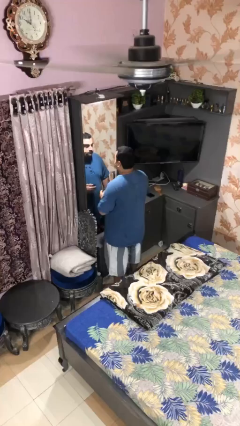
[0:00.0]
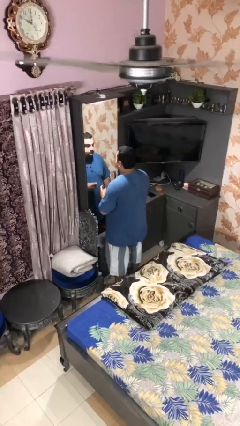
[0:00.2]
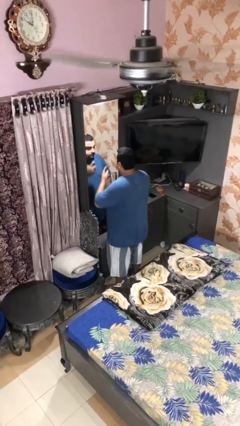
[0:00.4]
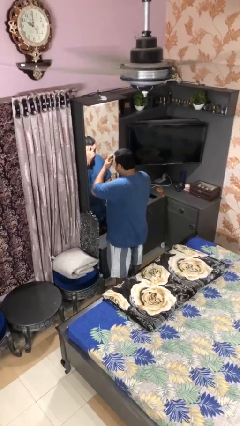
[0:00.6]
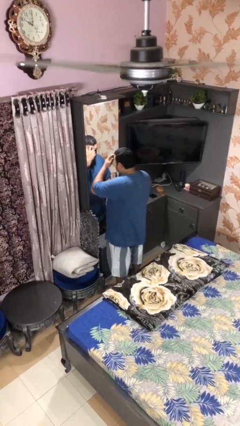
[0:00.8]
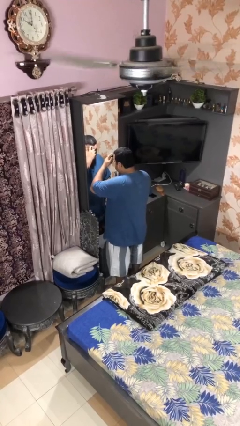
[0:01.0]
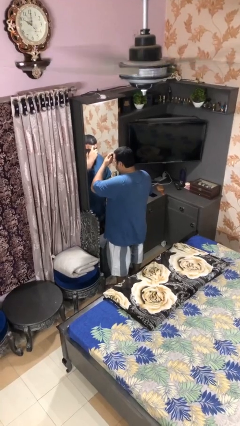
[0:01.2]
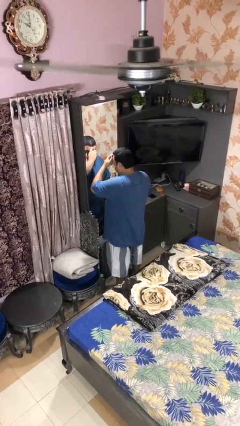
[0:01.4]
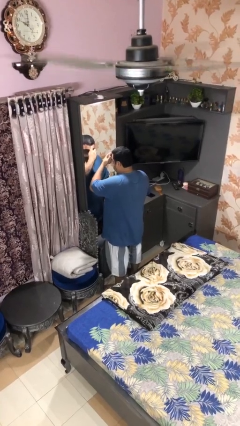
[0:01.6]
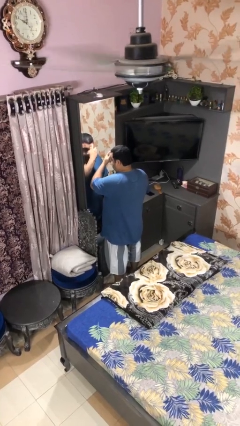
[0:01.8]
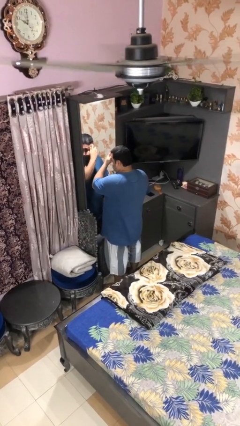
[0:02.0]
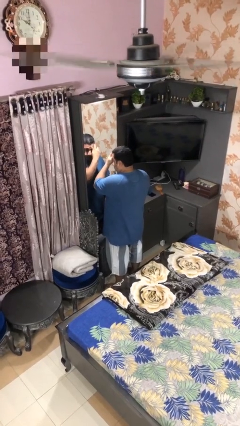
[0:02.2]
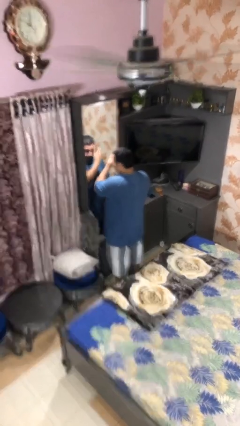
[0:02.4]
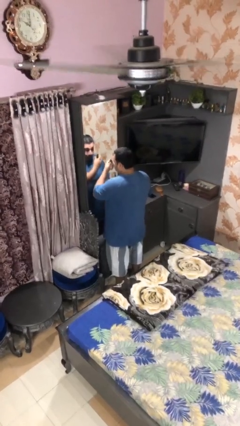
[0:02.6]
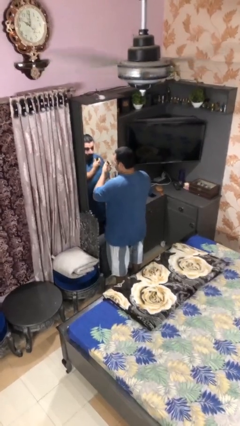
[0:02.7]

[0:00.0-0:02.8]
person applies foundation makeup

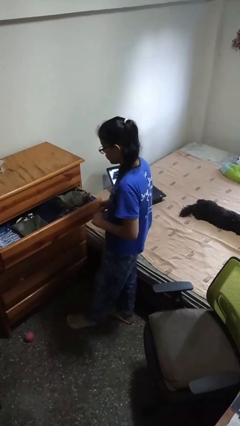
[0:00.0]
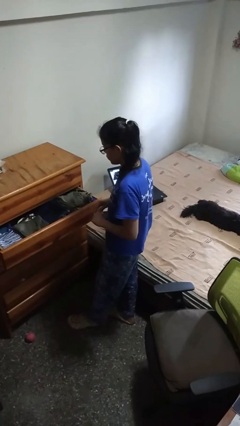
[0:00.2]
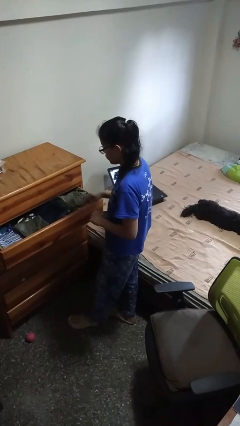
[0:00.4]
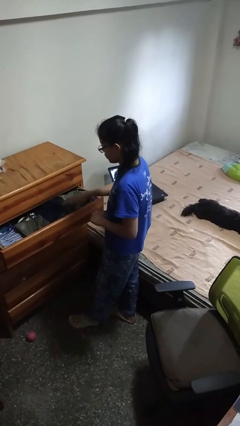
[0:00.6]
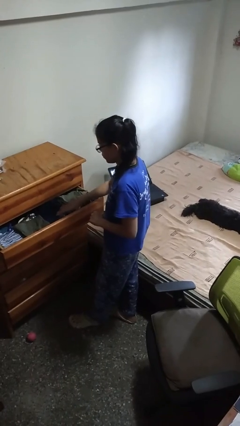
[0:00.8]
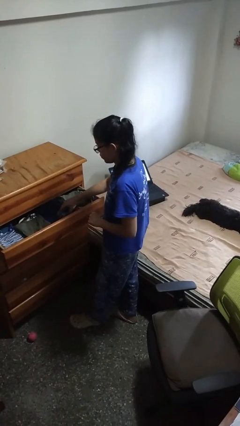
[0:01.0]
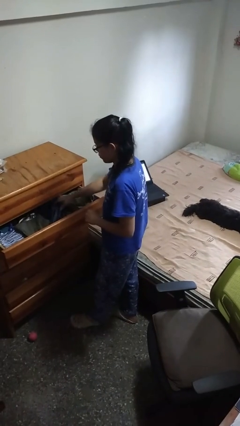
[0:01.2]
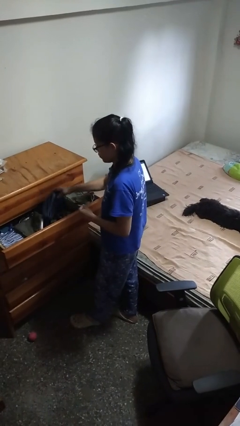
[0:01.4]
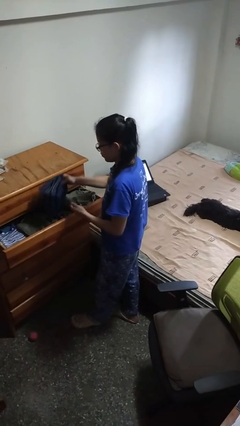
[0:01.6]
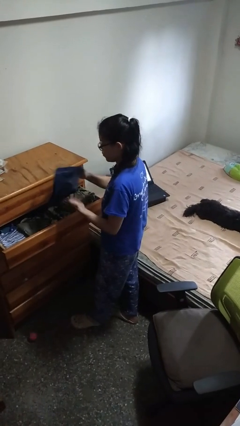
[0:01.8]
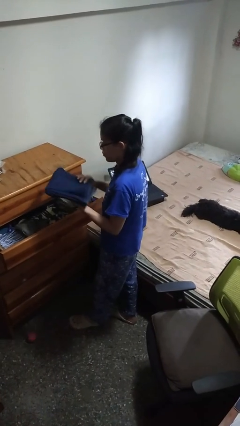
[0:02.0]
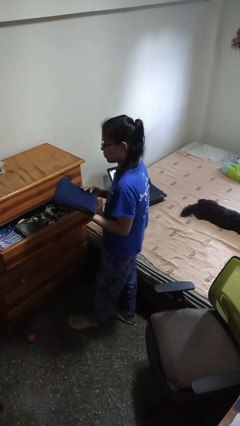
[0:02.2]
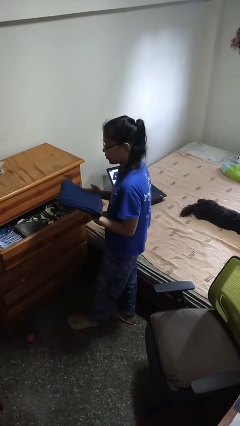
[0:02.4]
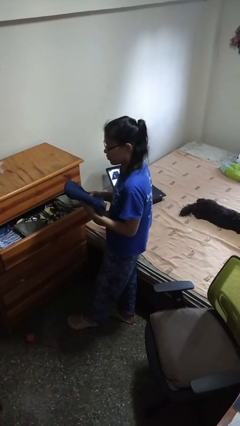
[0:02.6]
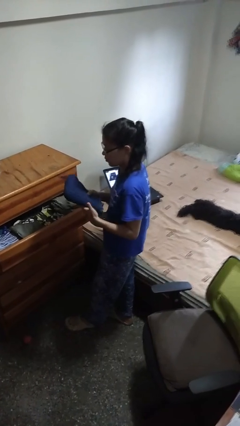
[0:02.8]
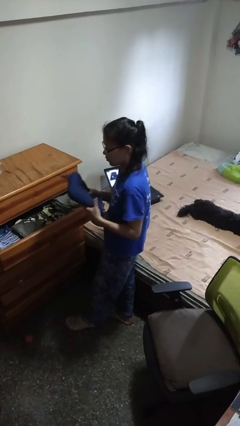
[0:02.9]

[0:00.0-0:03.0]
person takes clothes from dresser

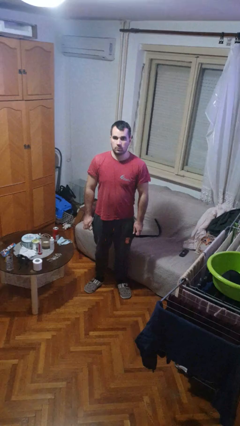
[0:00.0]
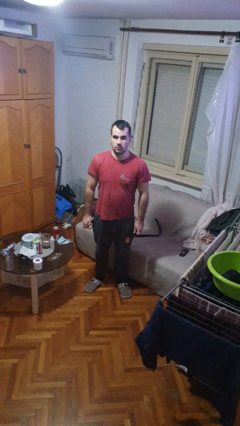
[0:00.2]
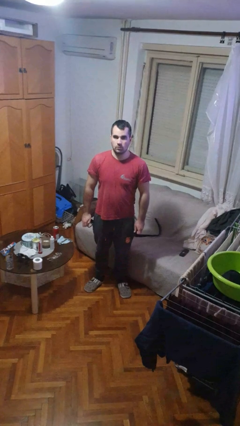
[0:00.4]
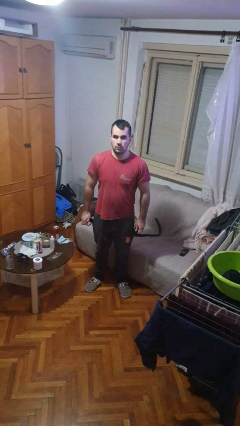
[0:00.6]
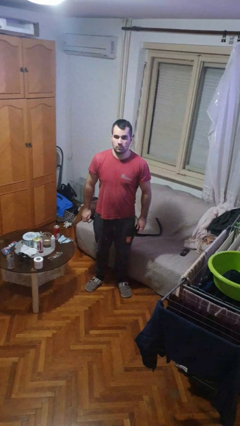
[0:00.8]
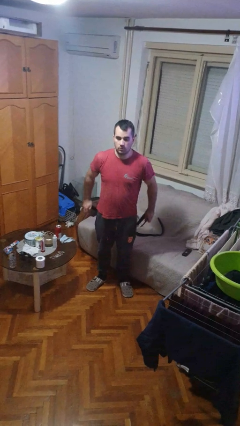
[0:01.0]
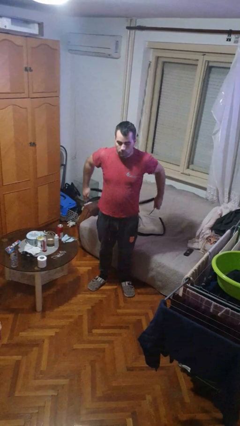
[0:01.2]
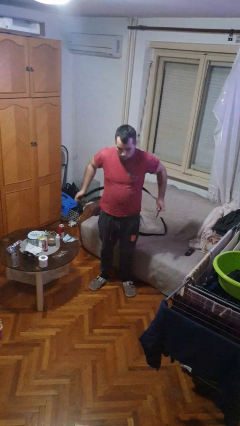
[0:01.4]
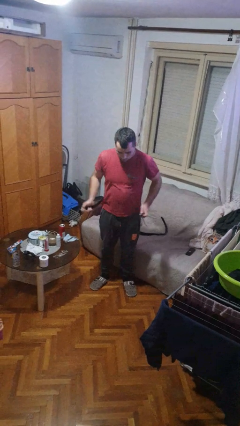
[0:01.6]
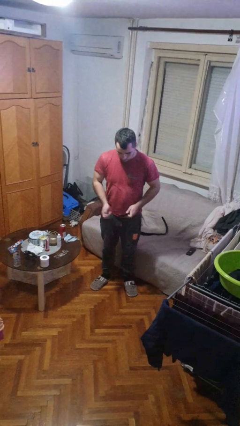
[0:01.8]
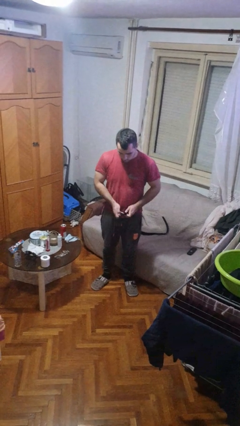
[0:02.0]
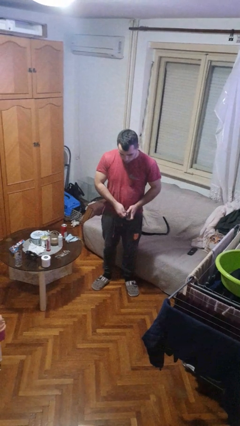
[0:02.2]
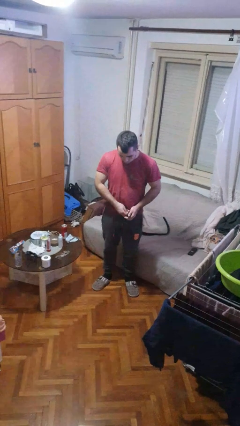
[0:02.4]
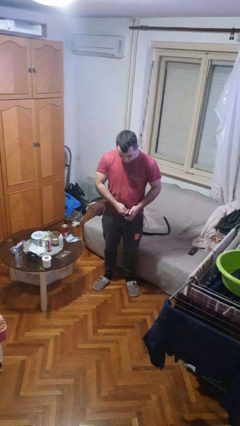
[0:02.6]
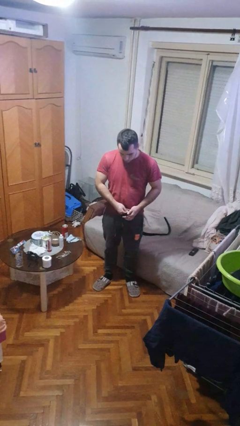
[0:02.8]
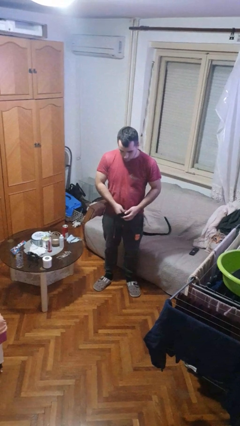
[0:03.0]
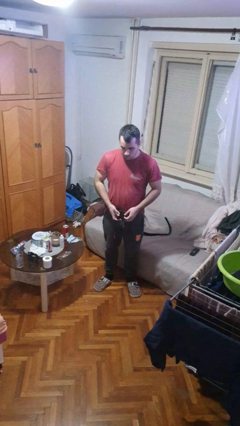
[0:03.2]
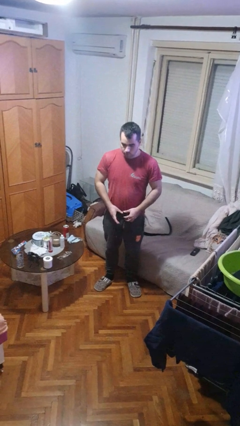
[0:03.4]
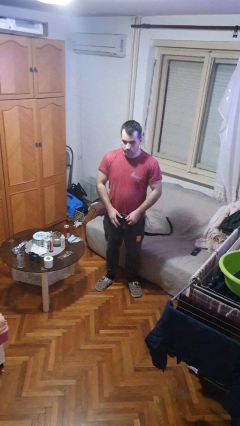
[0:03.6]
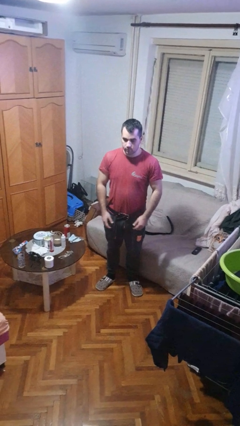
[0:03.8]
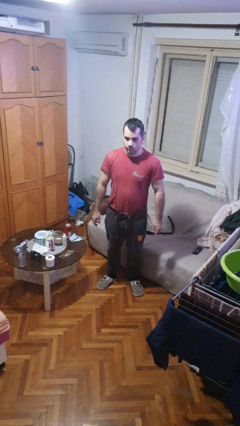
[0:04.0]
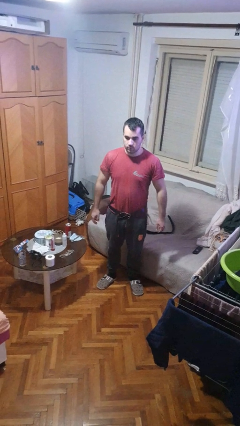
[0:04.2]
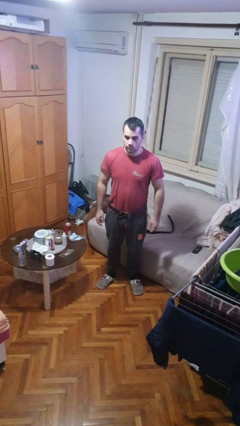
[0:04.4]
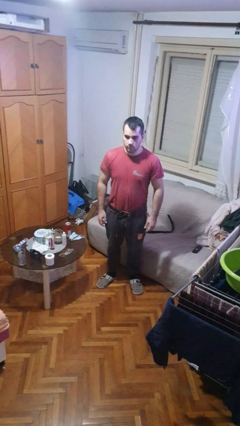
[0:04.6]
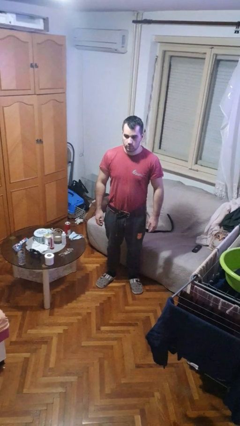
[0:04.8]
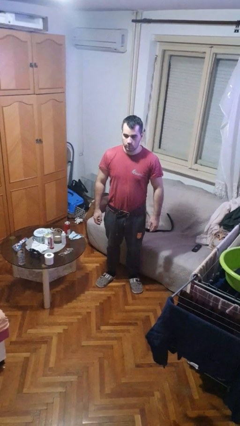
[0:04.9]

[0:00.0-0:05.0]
person puts on belt

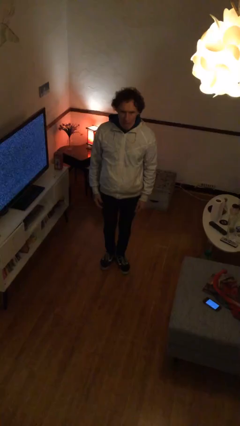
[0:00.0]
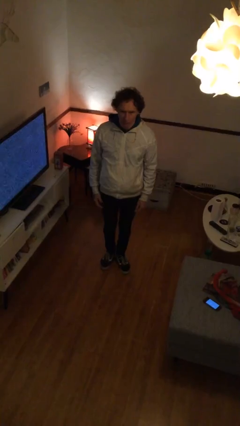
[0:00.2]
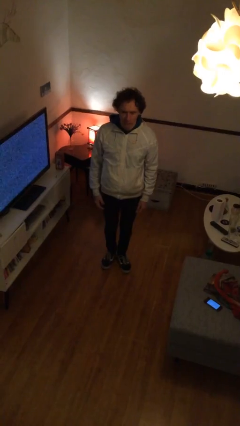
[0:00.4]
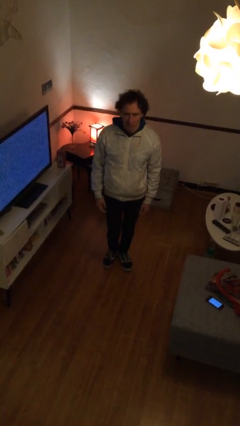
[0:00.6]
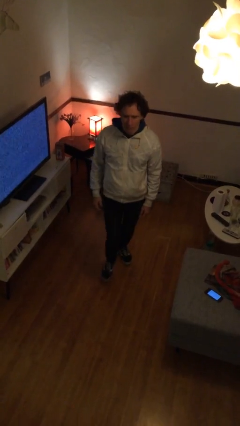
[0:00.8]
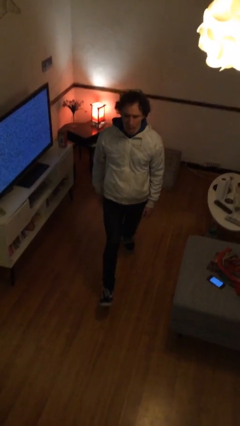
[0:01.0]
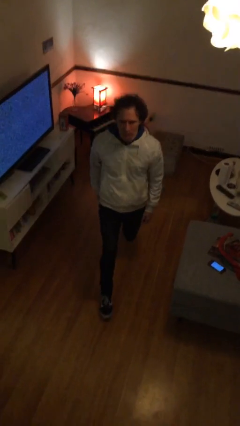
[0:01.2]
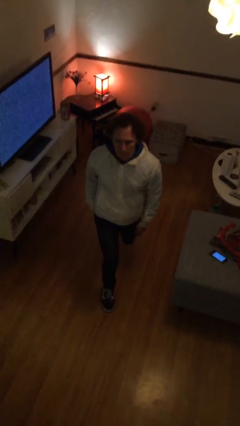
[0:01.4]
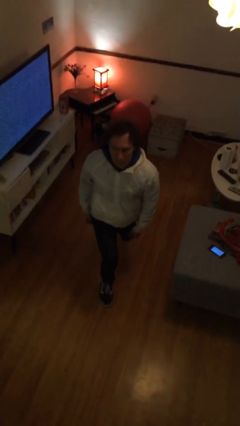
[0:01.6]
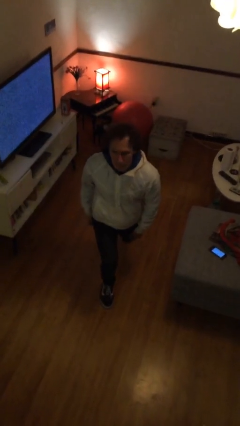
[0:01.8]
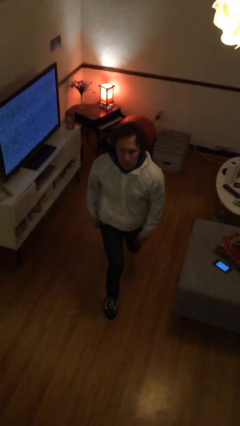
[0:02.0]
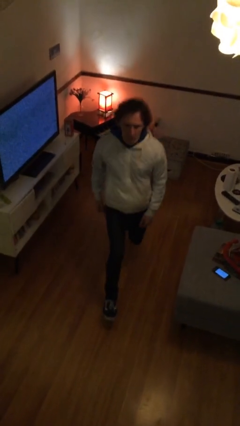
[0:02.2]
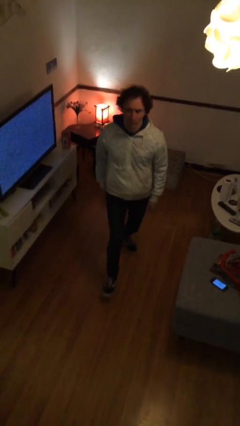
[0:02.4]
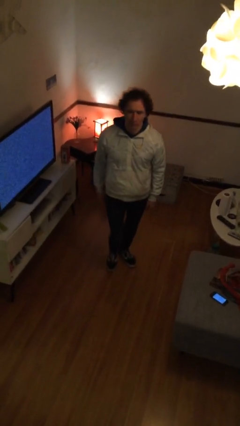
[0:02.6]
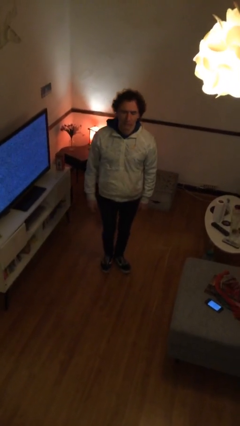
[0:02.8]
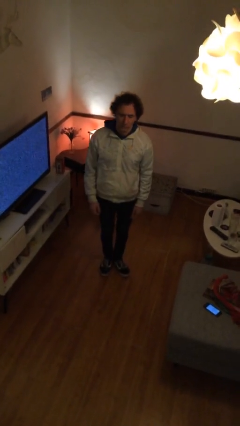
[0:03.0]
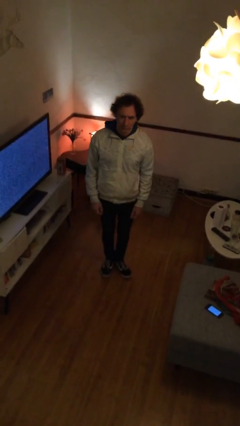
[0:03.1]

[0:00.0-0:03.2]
person exercises with lunges

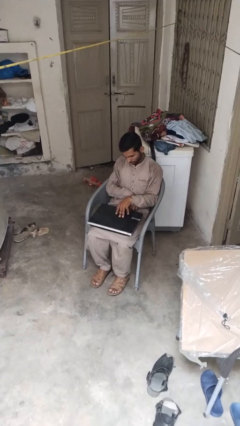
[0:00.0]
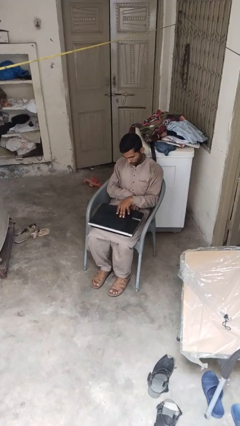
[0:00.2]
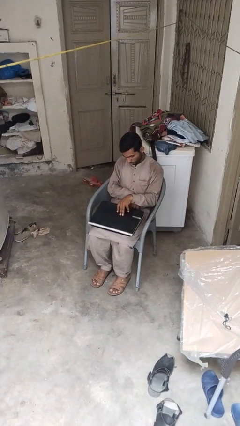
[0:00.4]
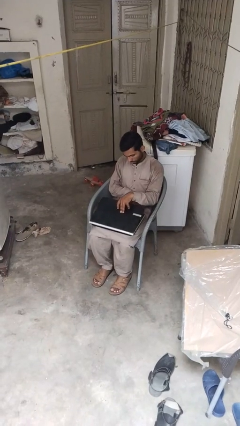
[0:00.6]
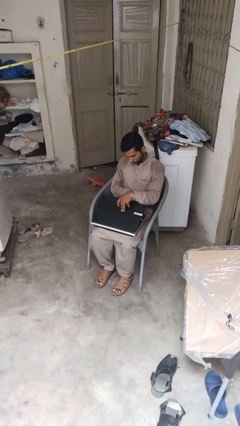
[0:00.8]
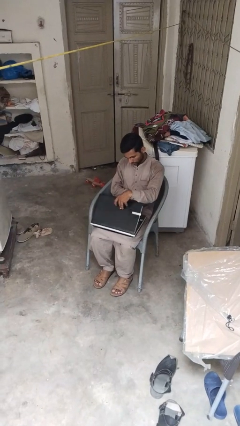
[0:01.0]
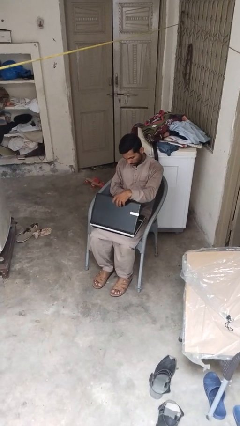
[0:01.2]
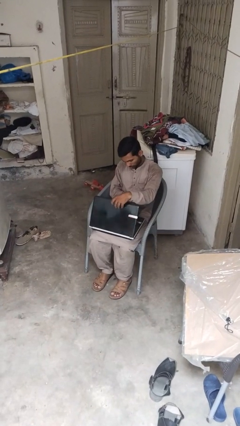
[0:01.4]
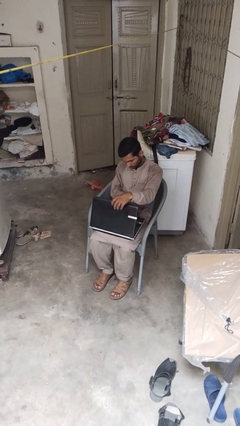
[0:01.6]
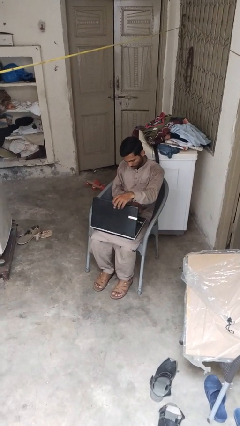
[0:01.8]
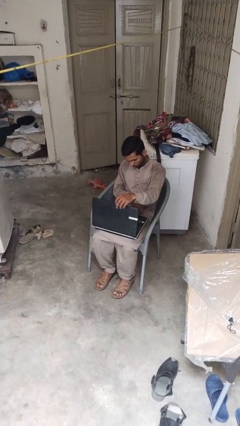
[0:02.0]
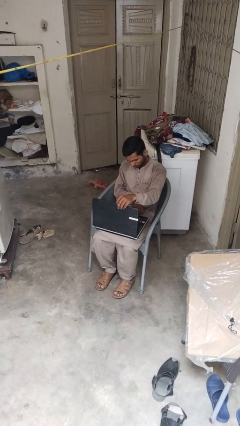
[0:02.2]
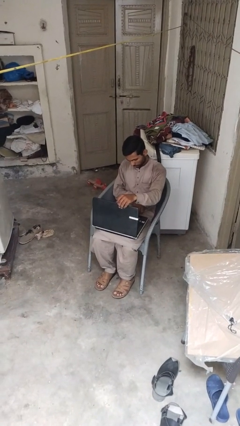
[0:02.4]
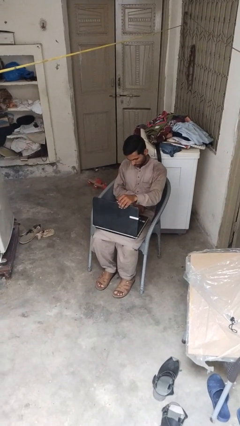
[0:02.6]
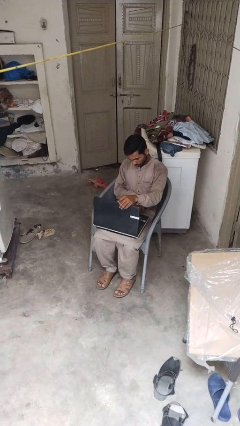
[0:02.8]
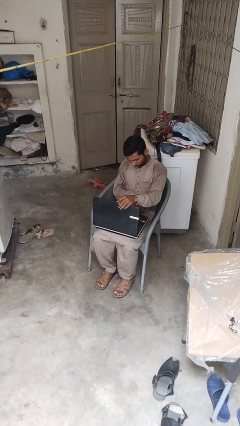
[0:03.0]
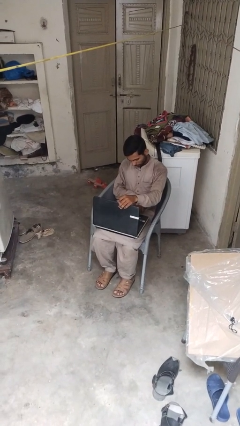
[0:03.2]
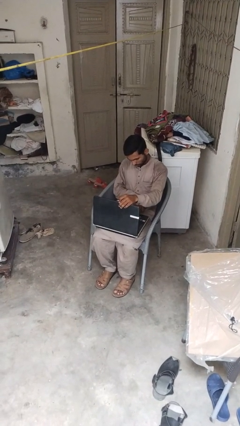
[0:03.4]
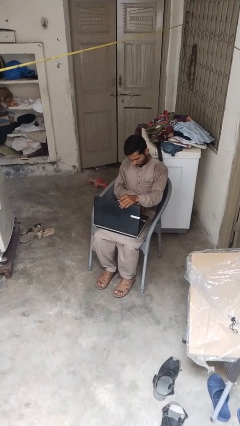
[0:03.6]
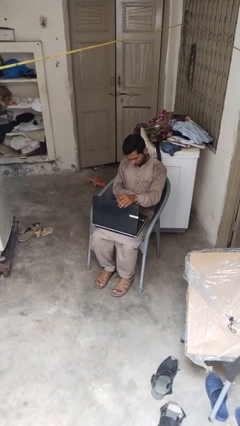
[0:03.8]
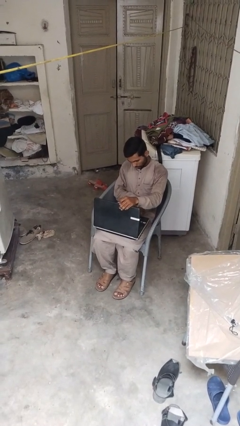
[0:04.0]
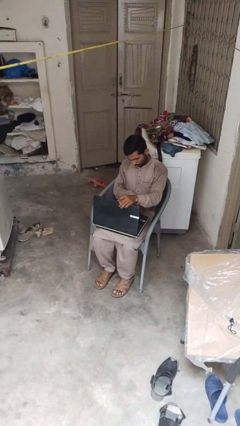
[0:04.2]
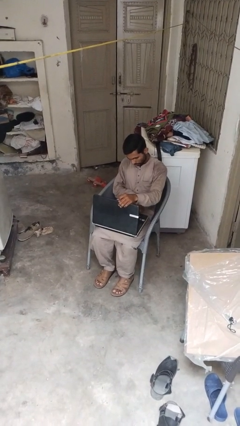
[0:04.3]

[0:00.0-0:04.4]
person opens laptop
